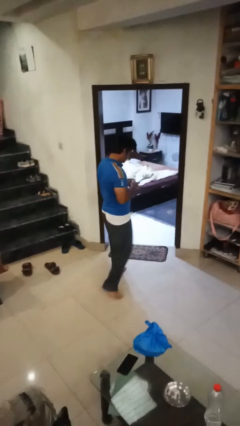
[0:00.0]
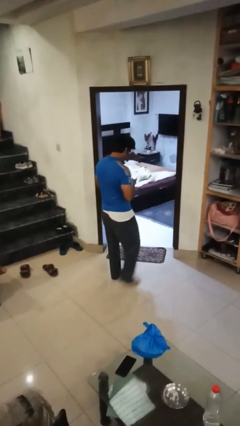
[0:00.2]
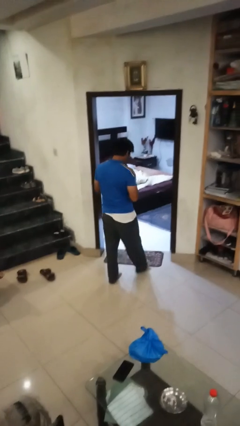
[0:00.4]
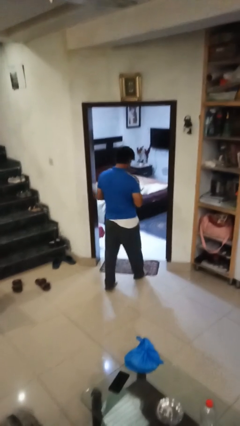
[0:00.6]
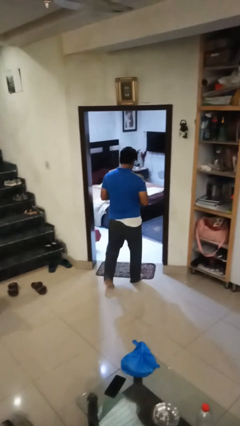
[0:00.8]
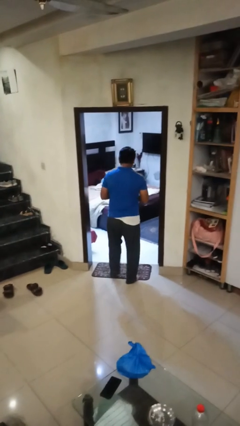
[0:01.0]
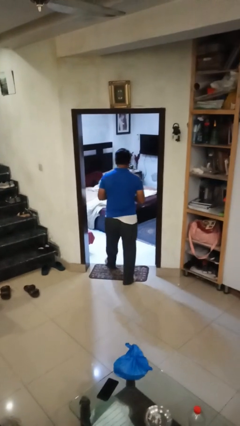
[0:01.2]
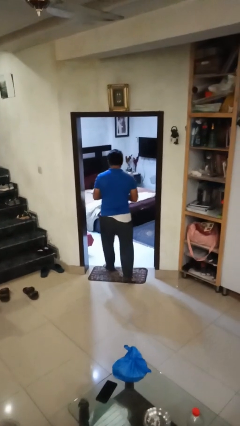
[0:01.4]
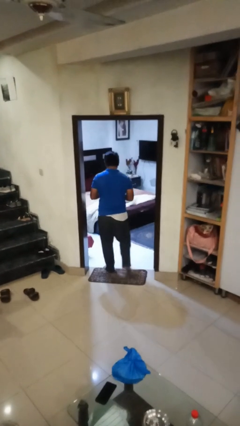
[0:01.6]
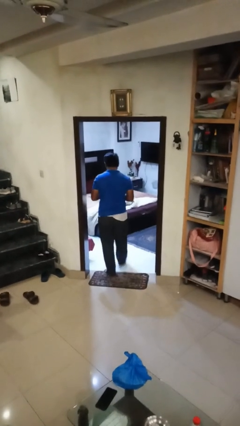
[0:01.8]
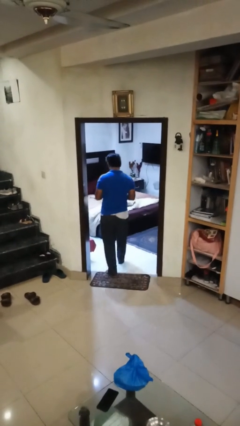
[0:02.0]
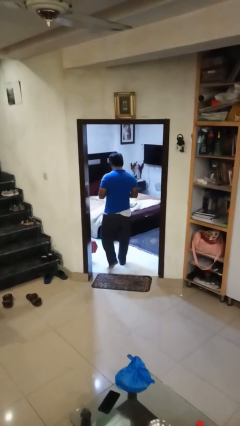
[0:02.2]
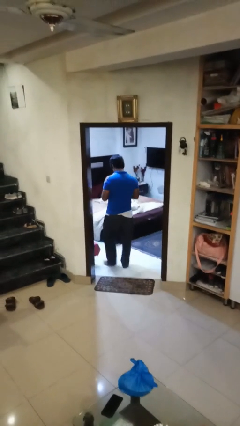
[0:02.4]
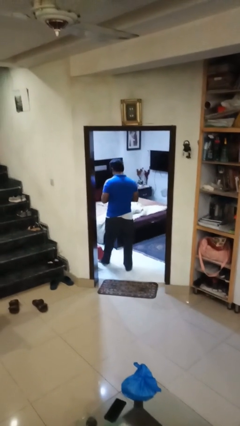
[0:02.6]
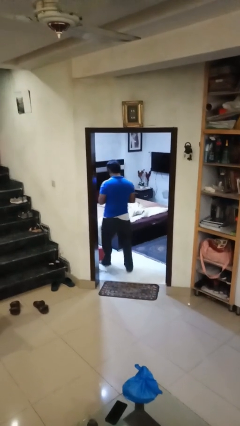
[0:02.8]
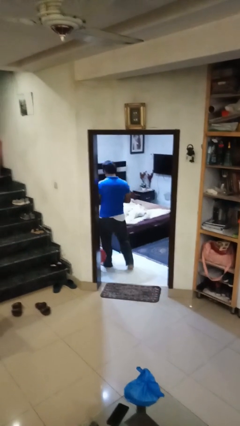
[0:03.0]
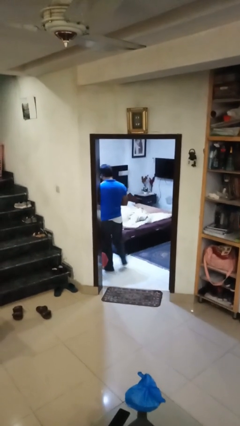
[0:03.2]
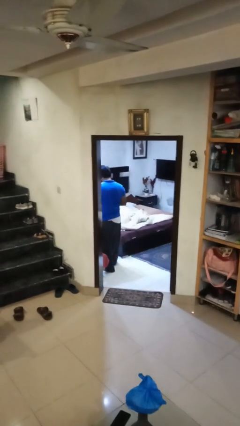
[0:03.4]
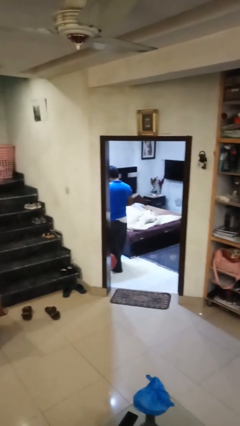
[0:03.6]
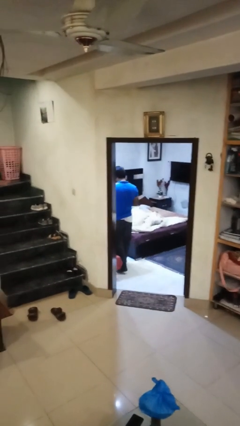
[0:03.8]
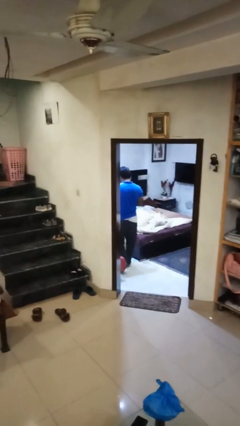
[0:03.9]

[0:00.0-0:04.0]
person exits scene through structure

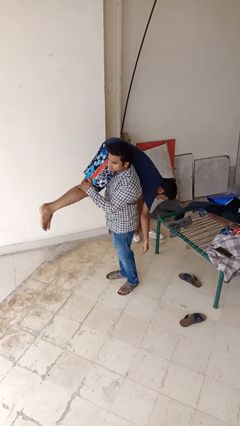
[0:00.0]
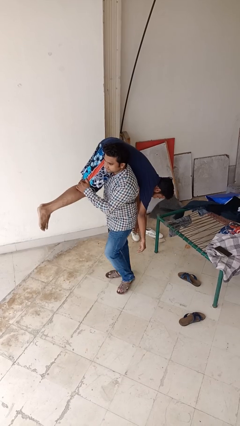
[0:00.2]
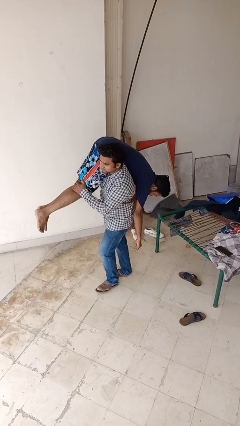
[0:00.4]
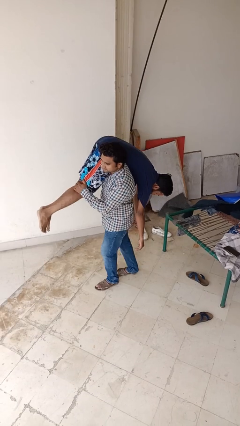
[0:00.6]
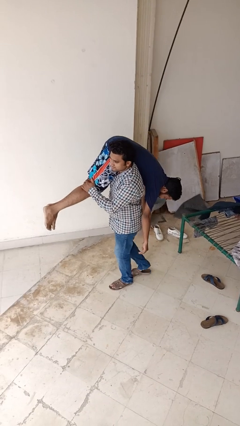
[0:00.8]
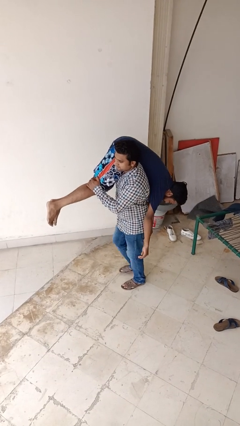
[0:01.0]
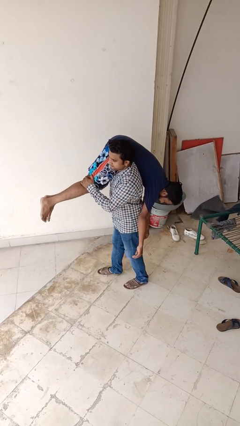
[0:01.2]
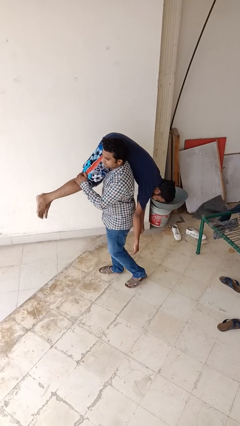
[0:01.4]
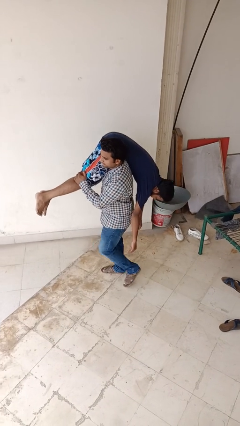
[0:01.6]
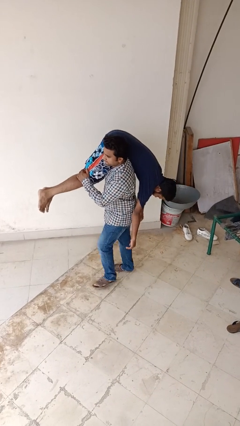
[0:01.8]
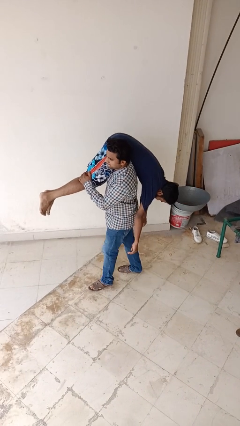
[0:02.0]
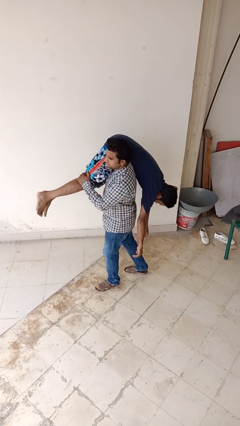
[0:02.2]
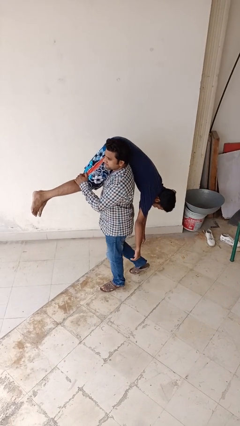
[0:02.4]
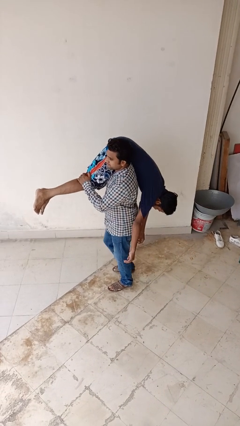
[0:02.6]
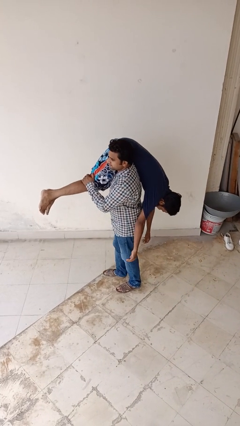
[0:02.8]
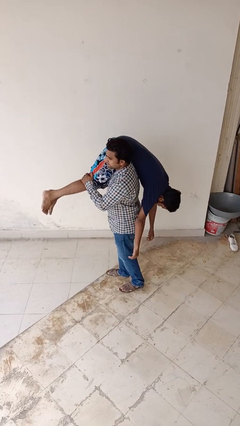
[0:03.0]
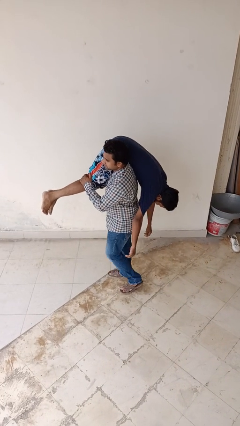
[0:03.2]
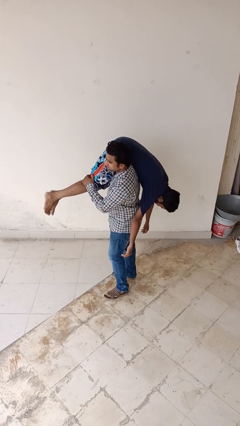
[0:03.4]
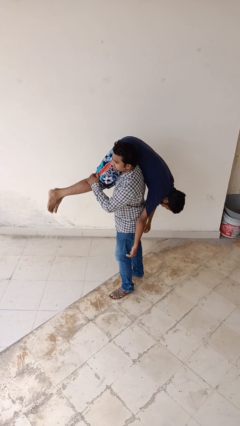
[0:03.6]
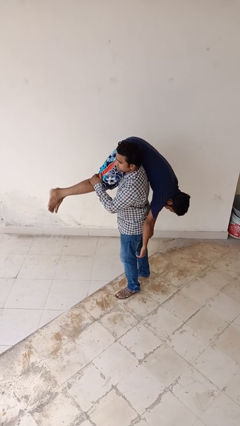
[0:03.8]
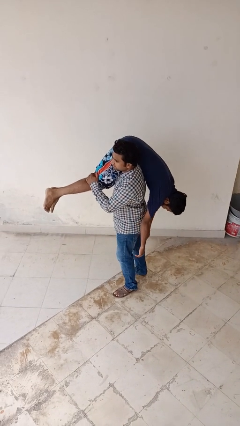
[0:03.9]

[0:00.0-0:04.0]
person carries person on shoulders

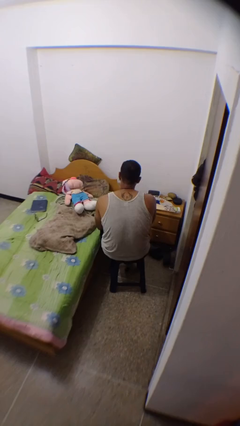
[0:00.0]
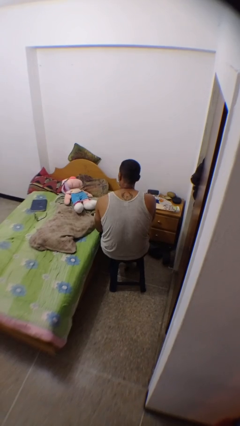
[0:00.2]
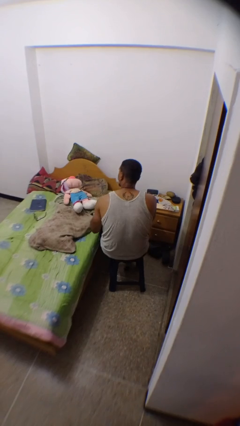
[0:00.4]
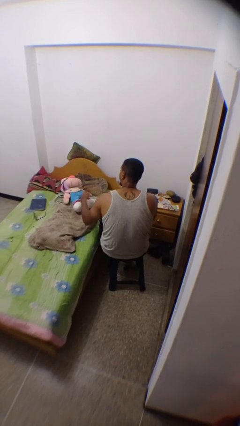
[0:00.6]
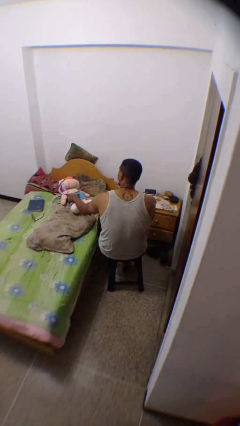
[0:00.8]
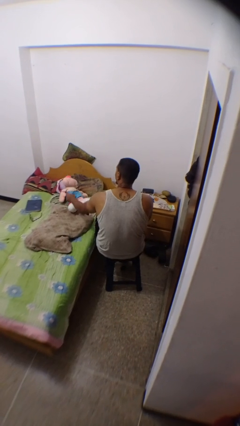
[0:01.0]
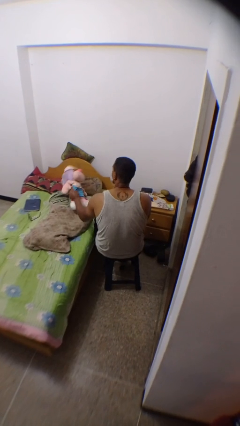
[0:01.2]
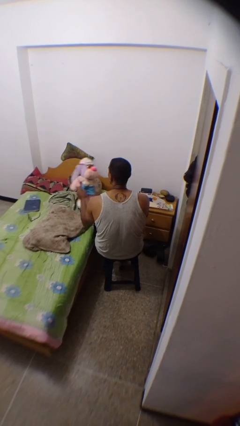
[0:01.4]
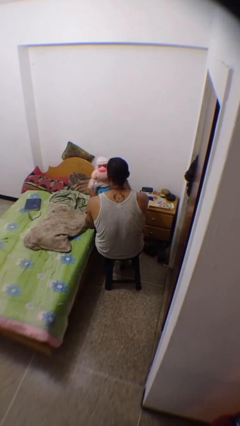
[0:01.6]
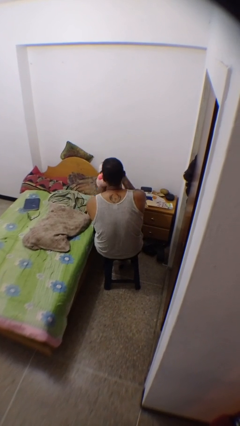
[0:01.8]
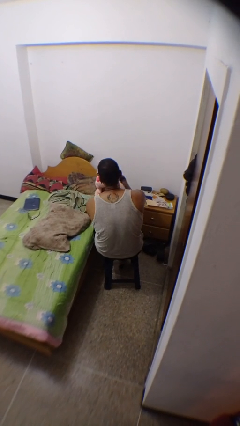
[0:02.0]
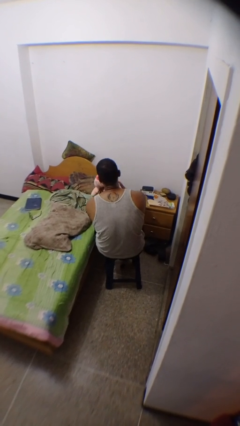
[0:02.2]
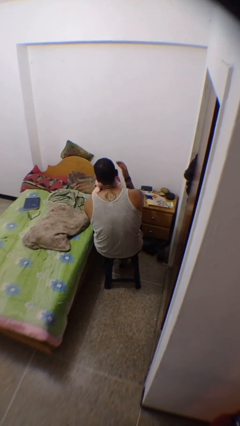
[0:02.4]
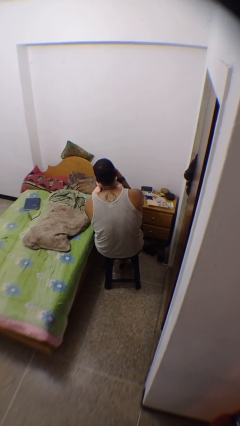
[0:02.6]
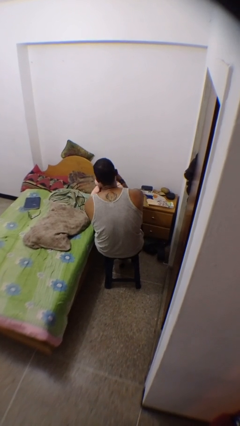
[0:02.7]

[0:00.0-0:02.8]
person picks up object from bed

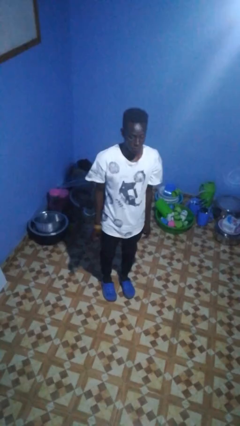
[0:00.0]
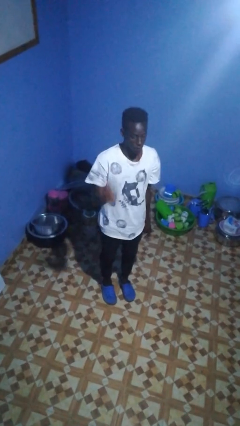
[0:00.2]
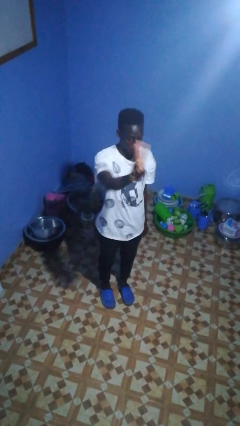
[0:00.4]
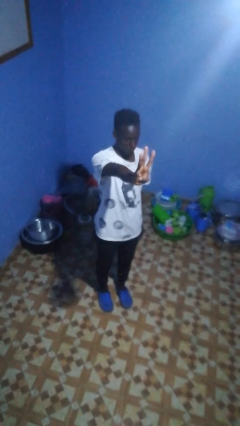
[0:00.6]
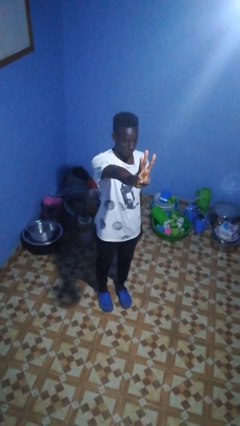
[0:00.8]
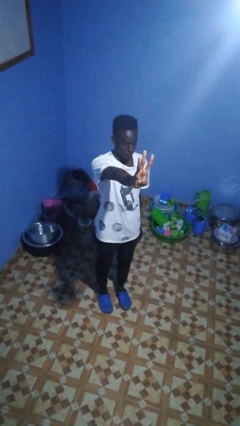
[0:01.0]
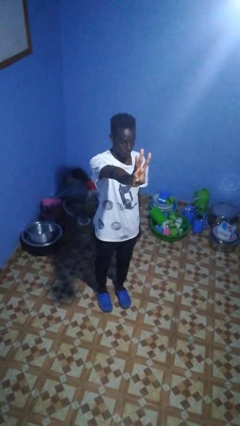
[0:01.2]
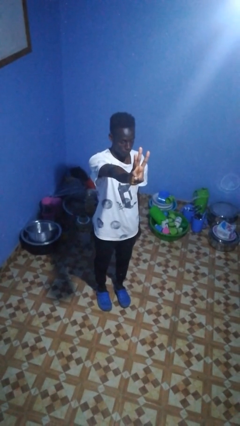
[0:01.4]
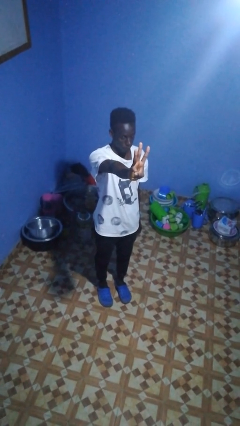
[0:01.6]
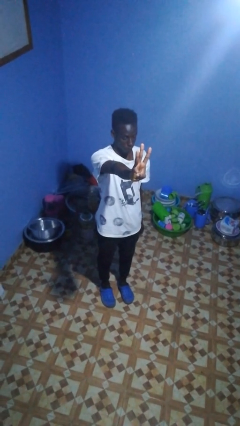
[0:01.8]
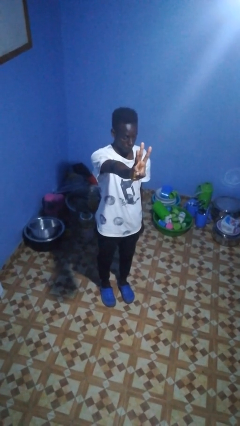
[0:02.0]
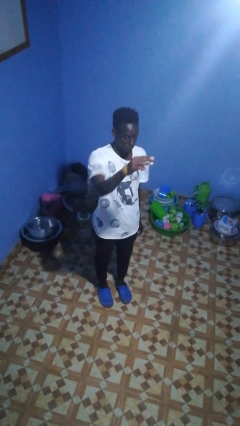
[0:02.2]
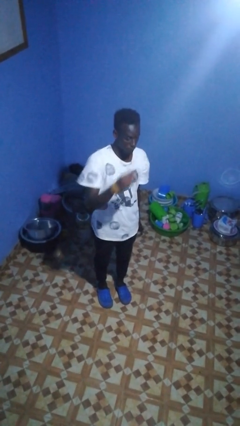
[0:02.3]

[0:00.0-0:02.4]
person gestures number three

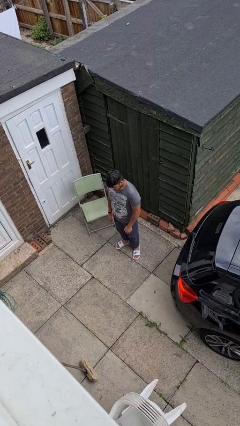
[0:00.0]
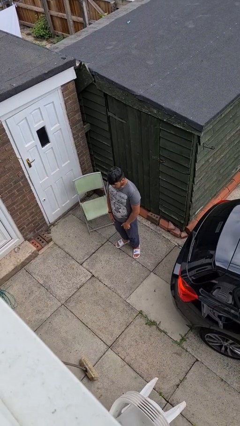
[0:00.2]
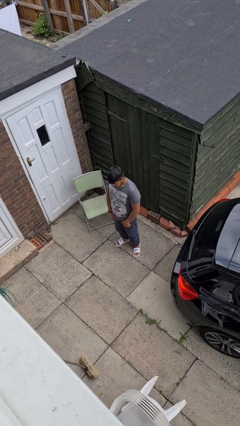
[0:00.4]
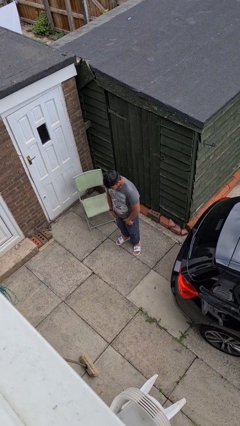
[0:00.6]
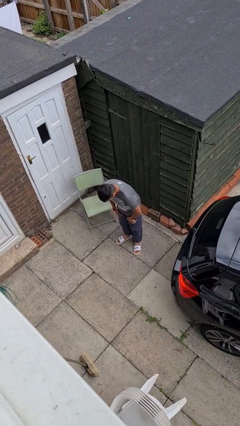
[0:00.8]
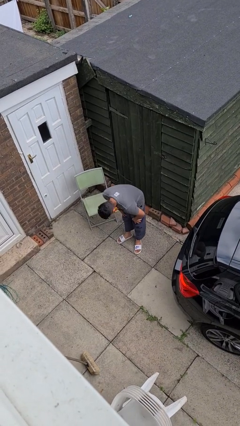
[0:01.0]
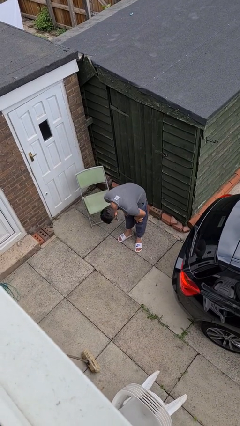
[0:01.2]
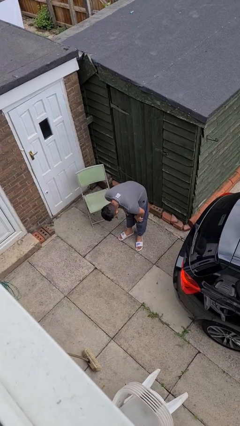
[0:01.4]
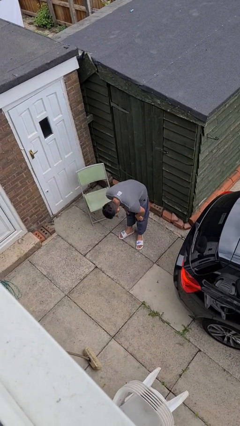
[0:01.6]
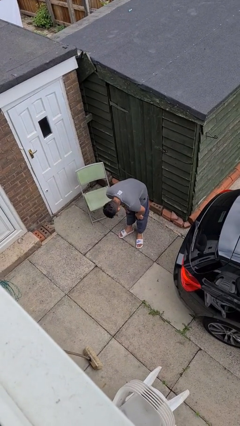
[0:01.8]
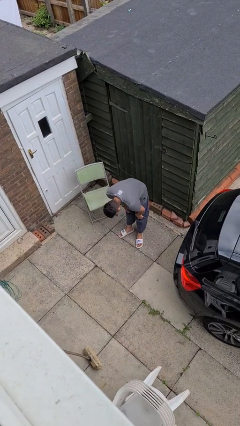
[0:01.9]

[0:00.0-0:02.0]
person bows

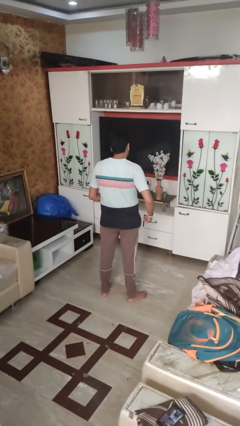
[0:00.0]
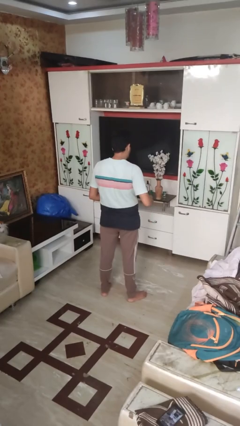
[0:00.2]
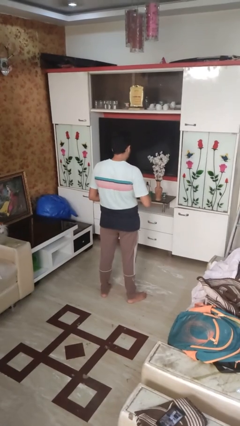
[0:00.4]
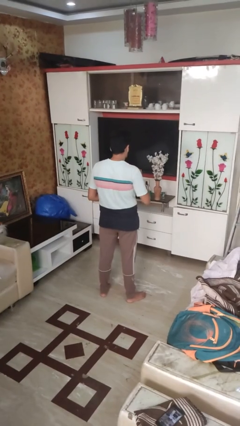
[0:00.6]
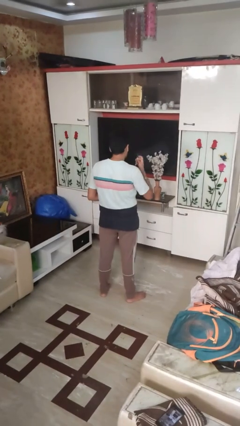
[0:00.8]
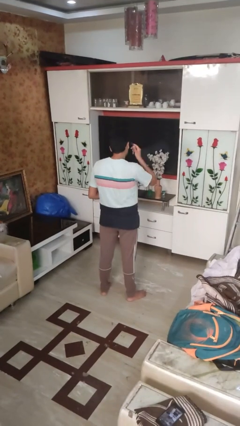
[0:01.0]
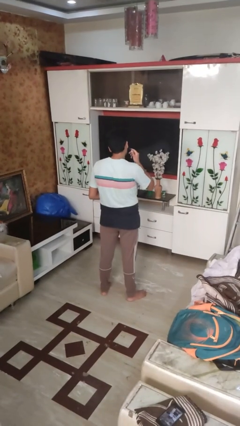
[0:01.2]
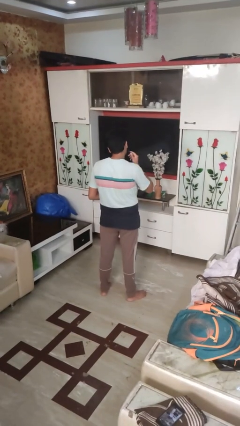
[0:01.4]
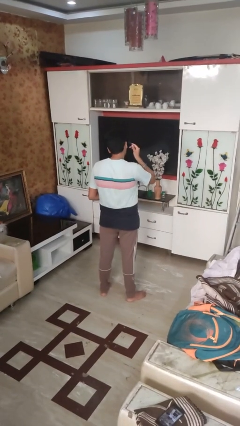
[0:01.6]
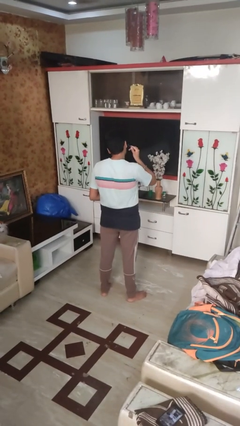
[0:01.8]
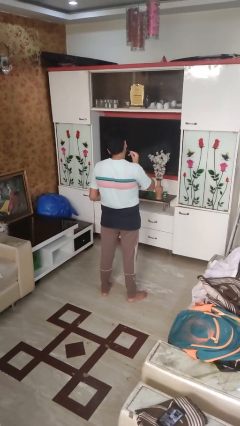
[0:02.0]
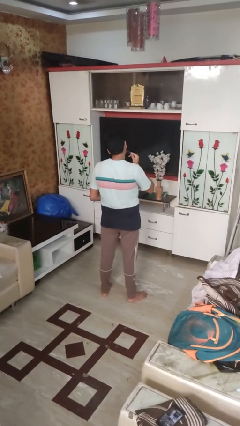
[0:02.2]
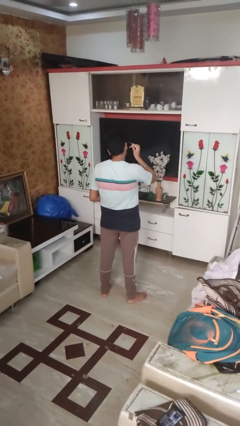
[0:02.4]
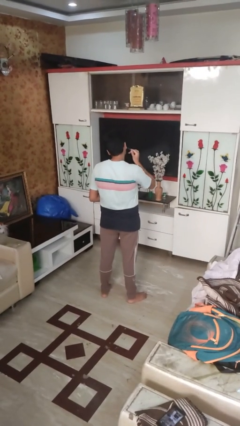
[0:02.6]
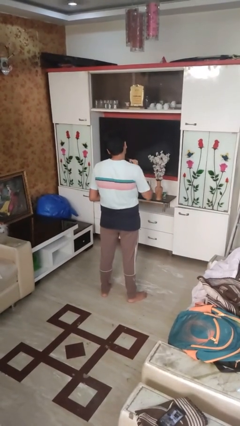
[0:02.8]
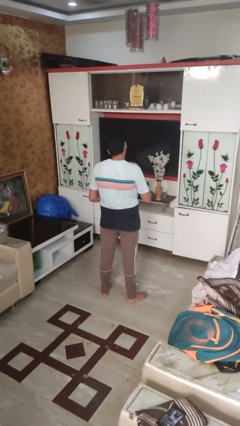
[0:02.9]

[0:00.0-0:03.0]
person shaves face
